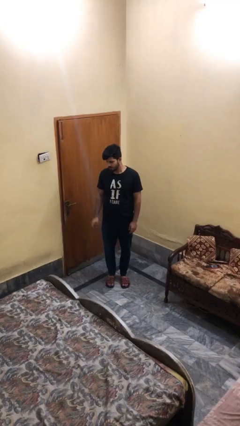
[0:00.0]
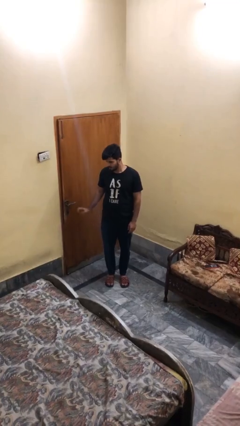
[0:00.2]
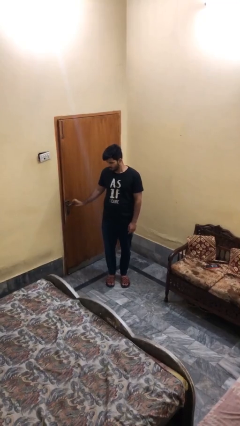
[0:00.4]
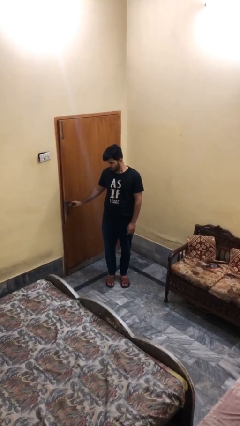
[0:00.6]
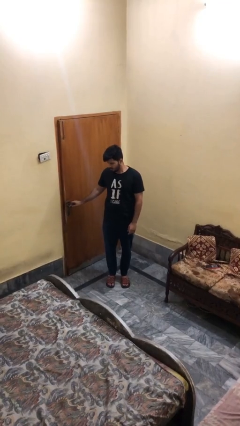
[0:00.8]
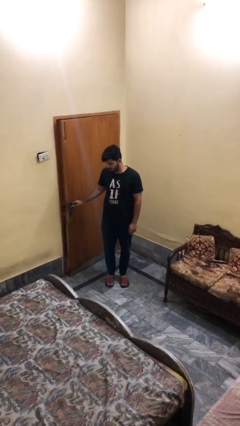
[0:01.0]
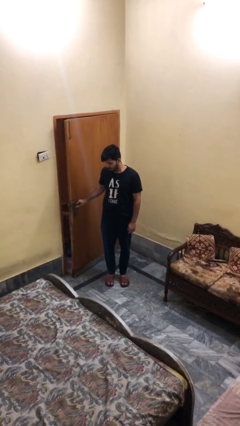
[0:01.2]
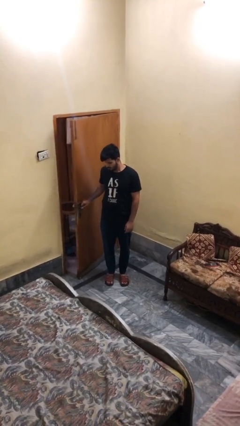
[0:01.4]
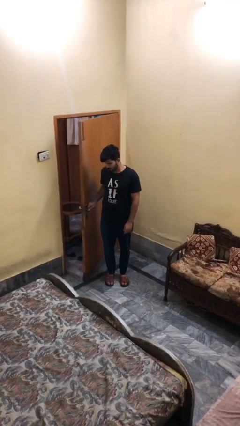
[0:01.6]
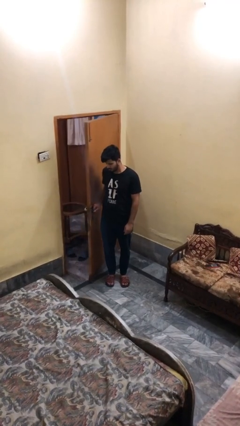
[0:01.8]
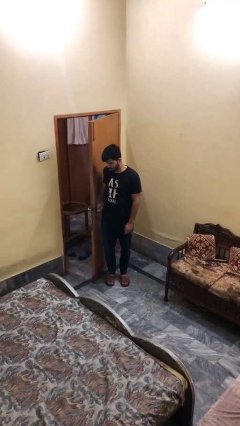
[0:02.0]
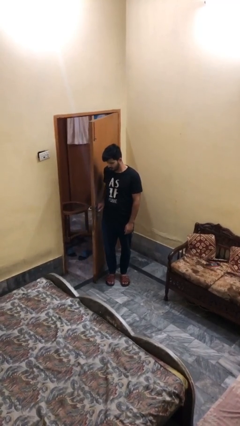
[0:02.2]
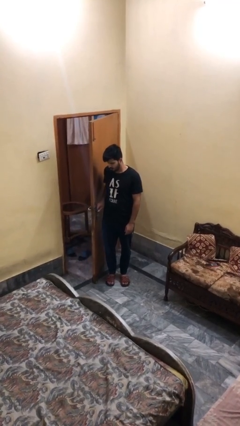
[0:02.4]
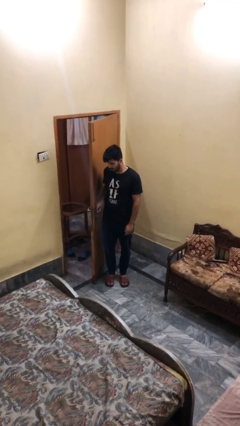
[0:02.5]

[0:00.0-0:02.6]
person opens facility door

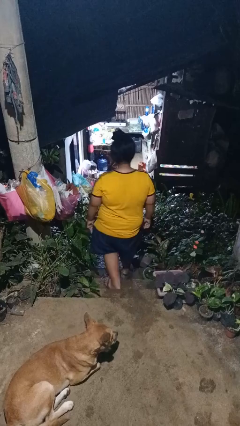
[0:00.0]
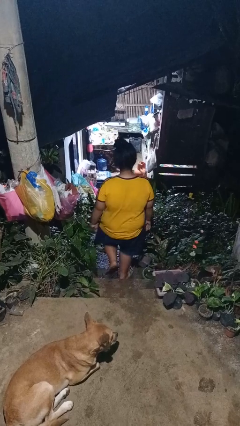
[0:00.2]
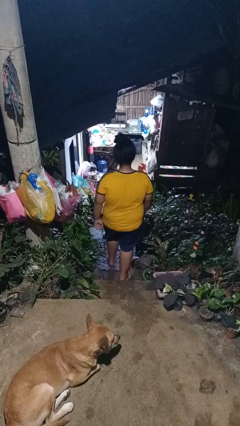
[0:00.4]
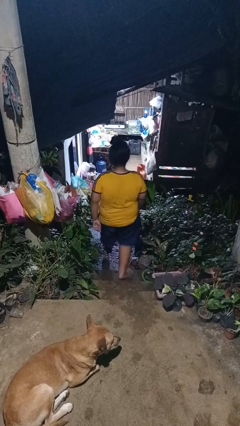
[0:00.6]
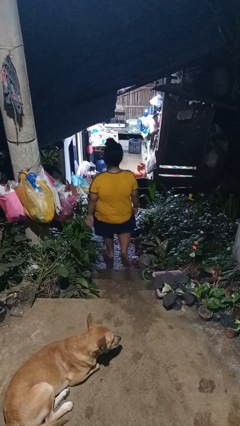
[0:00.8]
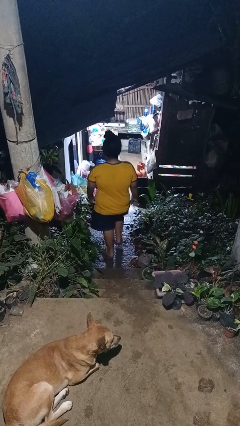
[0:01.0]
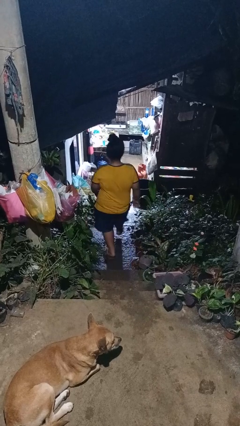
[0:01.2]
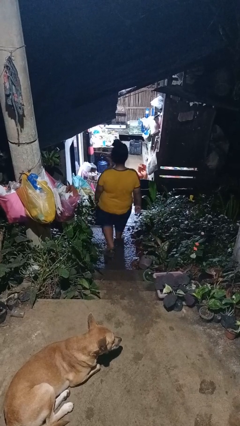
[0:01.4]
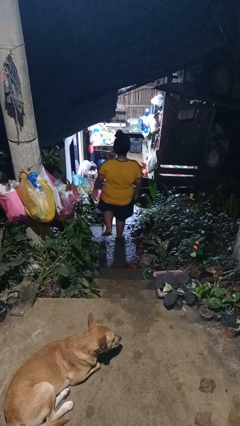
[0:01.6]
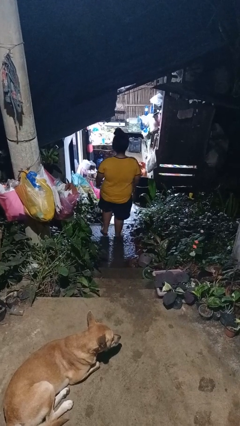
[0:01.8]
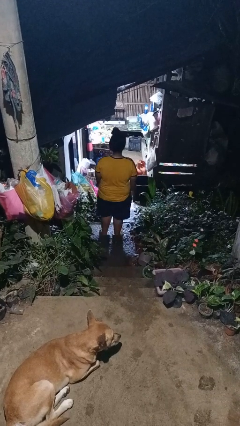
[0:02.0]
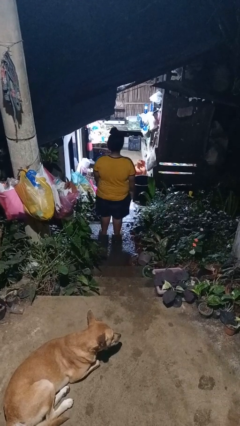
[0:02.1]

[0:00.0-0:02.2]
person climbs down stairs

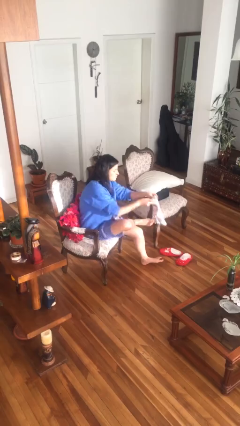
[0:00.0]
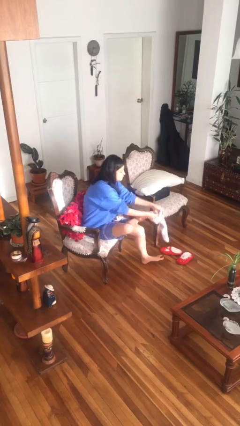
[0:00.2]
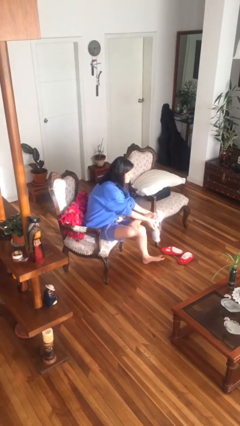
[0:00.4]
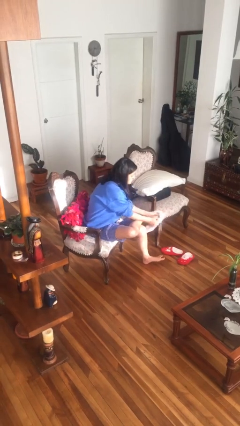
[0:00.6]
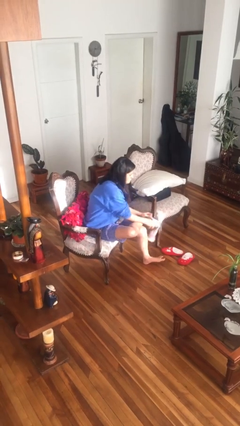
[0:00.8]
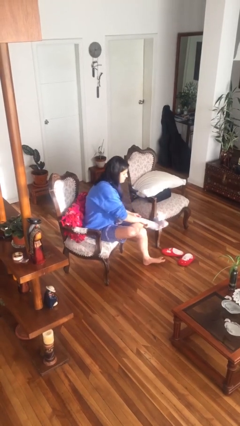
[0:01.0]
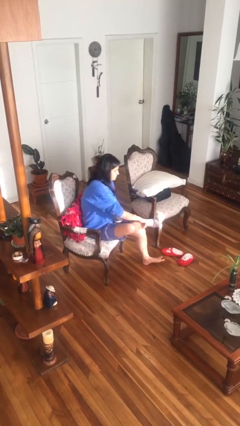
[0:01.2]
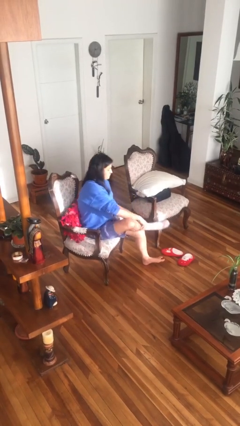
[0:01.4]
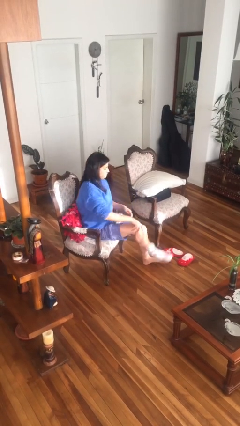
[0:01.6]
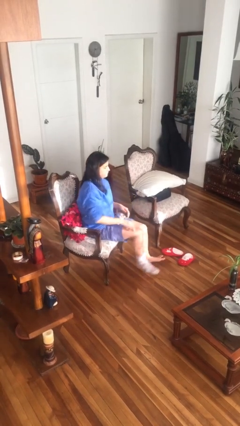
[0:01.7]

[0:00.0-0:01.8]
person puts on socks

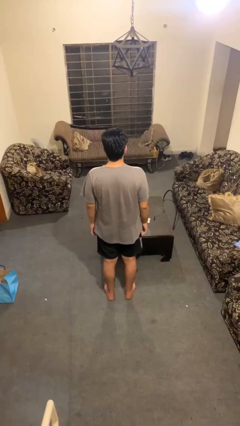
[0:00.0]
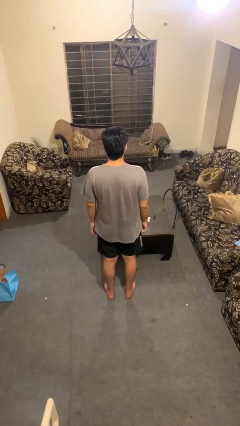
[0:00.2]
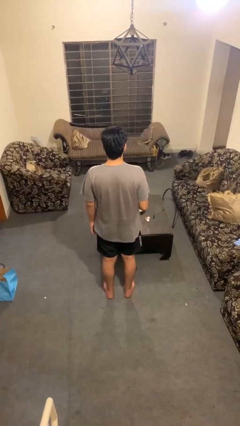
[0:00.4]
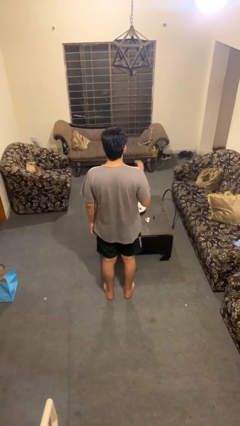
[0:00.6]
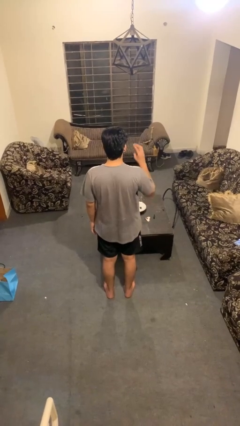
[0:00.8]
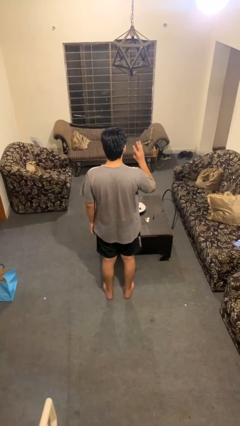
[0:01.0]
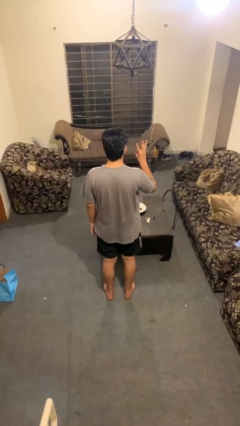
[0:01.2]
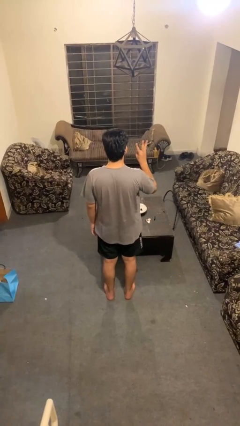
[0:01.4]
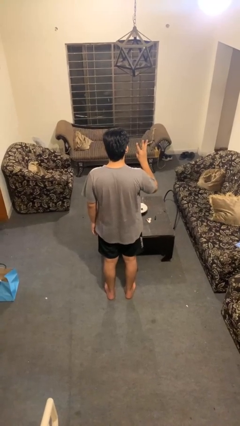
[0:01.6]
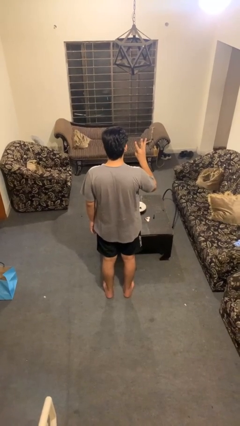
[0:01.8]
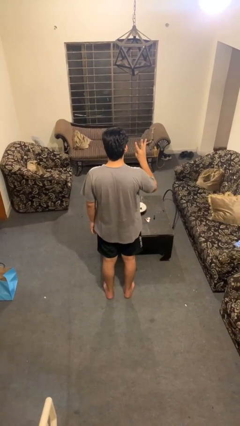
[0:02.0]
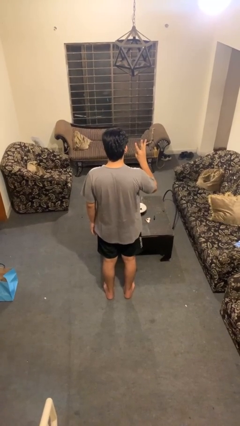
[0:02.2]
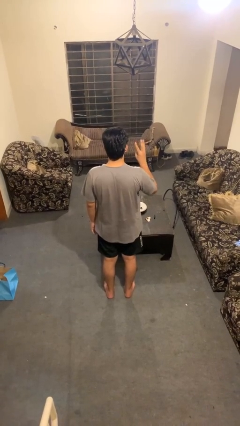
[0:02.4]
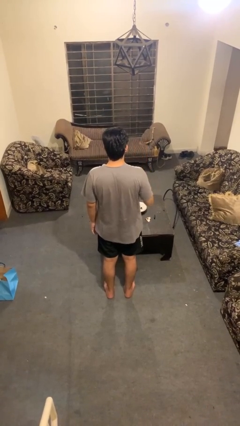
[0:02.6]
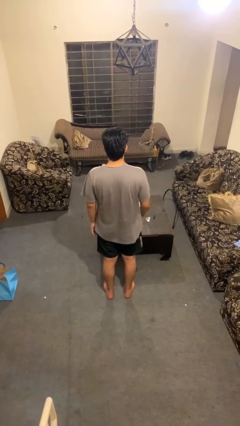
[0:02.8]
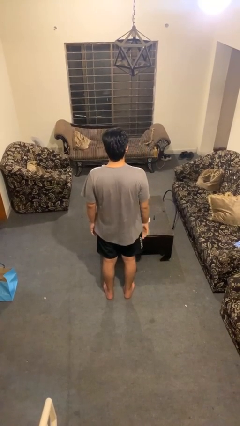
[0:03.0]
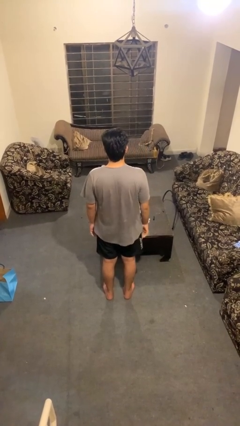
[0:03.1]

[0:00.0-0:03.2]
person gestures number three

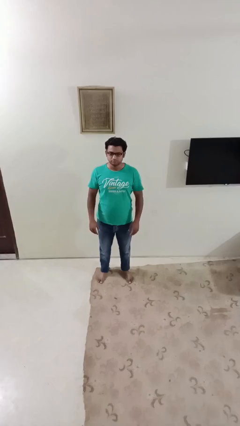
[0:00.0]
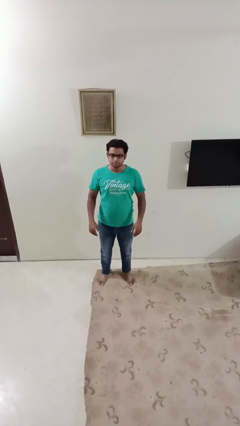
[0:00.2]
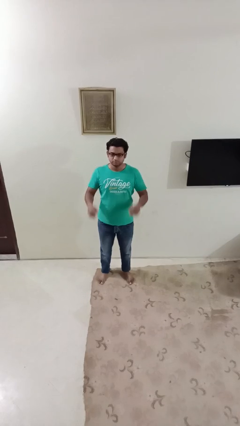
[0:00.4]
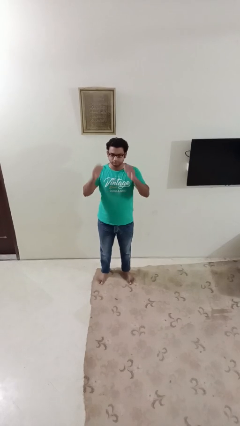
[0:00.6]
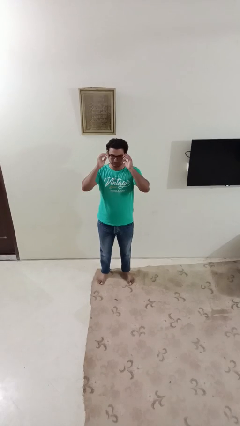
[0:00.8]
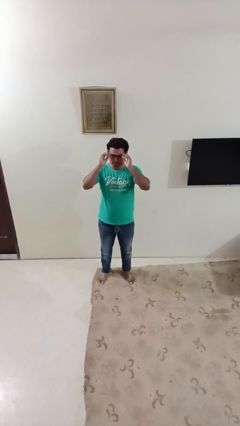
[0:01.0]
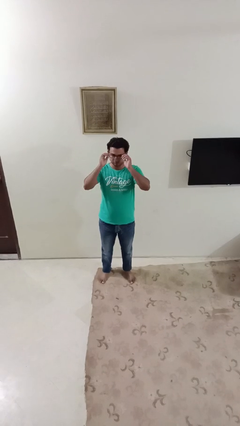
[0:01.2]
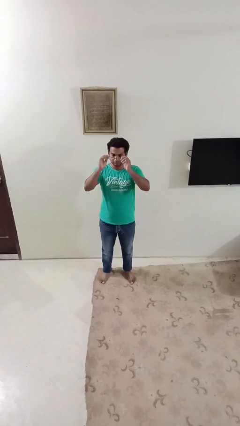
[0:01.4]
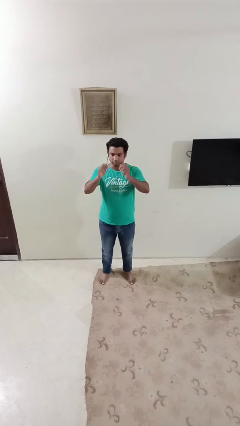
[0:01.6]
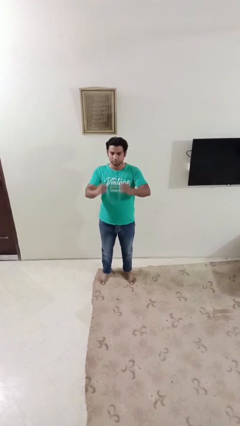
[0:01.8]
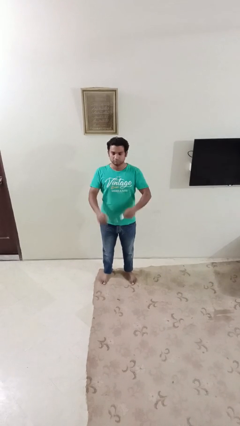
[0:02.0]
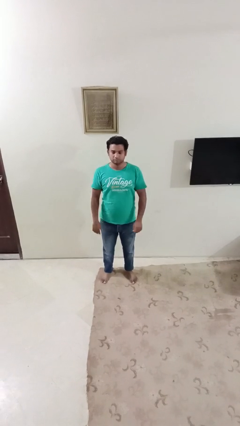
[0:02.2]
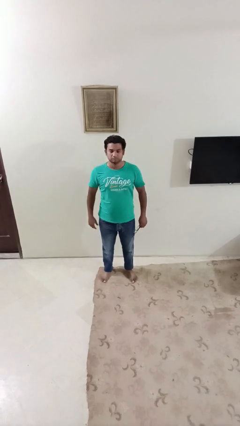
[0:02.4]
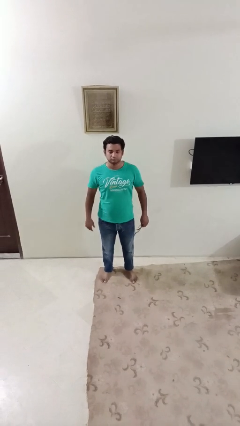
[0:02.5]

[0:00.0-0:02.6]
person takes off glasses

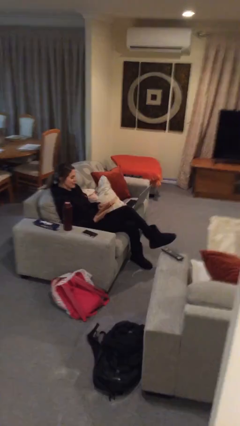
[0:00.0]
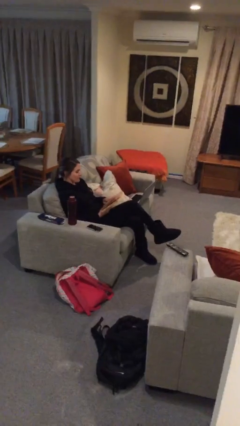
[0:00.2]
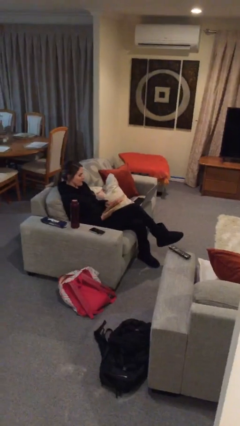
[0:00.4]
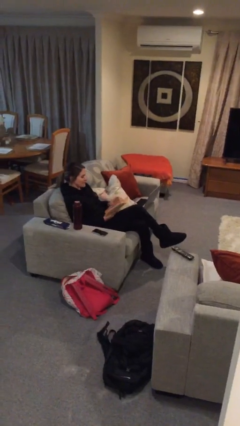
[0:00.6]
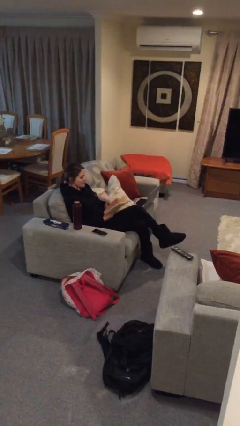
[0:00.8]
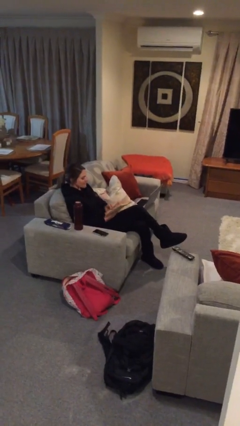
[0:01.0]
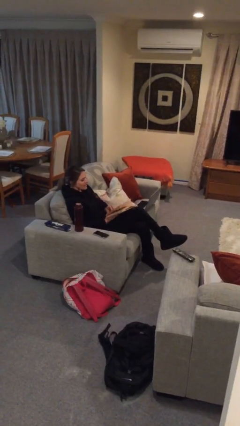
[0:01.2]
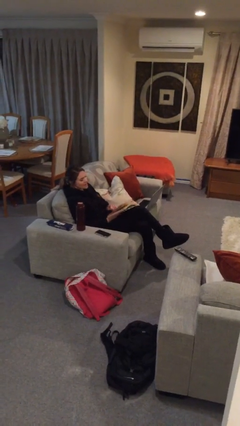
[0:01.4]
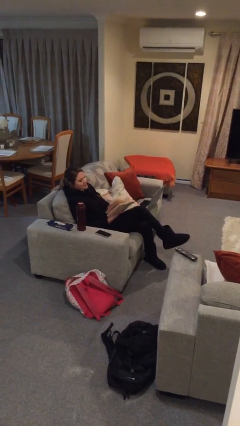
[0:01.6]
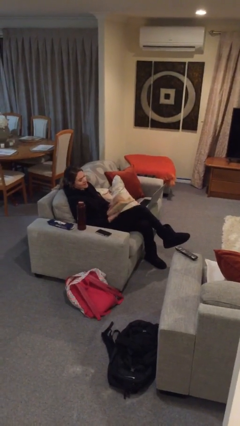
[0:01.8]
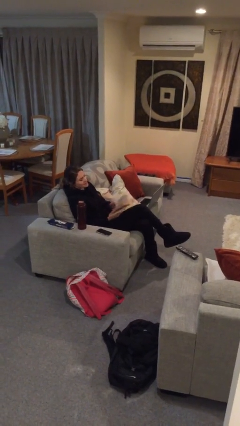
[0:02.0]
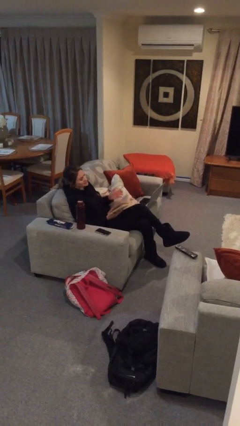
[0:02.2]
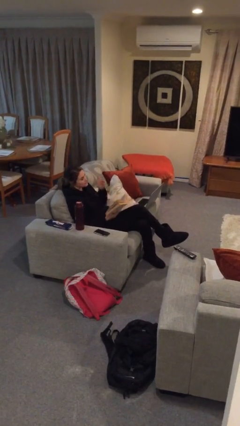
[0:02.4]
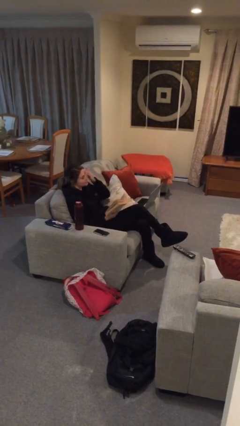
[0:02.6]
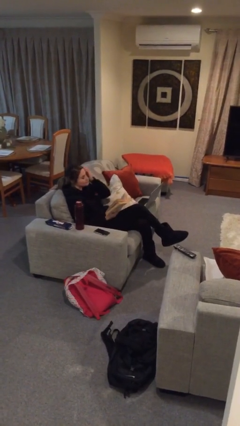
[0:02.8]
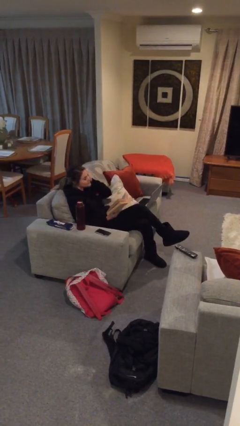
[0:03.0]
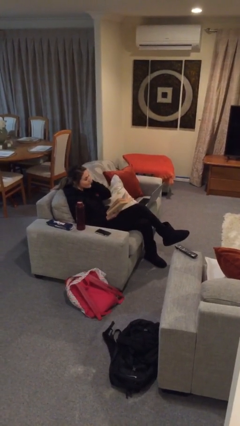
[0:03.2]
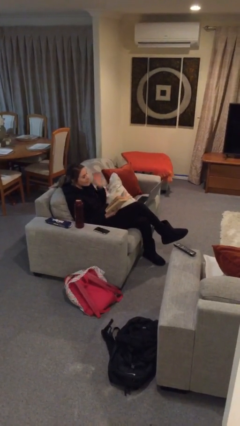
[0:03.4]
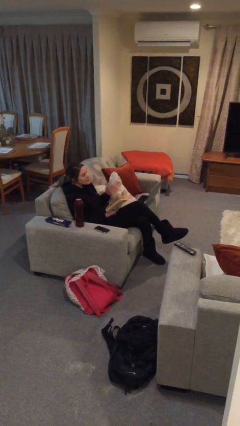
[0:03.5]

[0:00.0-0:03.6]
person reads document

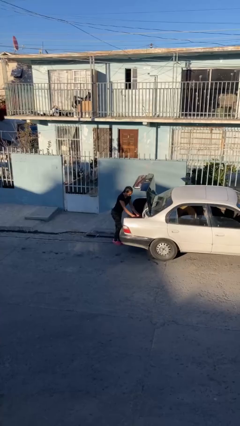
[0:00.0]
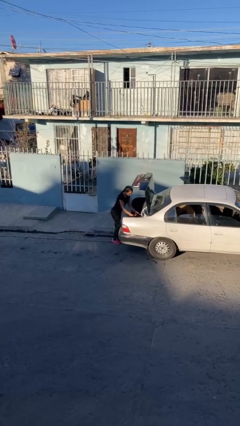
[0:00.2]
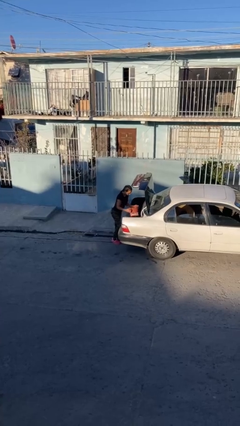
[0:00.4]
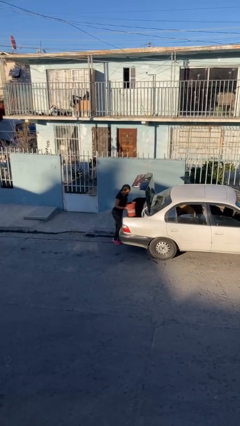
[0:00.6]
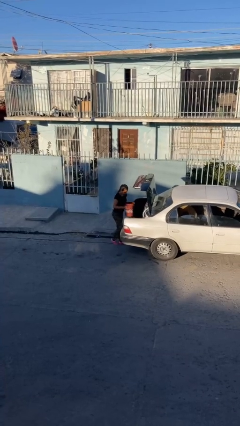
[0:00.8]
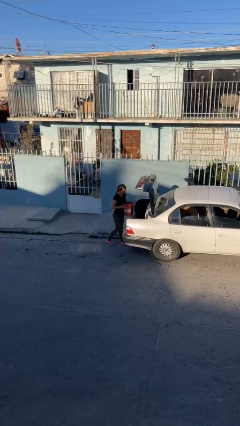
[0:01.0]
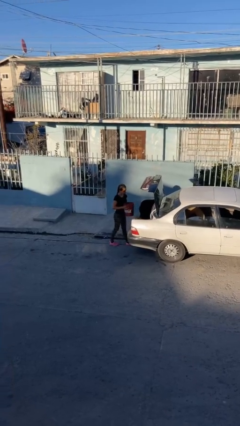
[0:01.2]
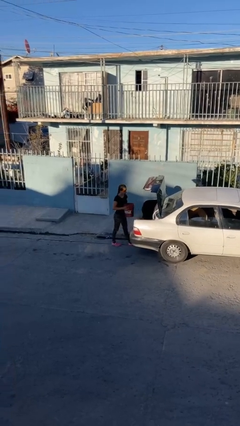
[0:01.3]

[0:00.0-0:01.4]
person unloads car
